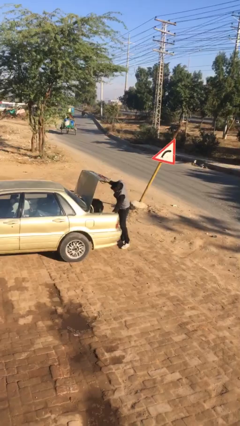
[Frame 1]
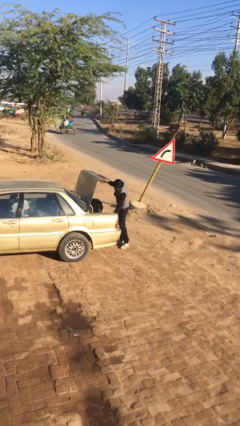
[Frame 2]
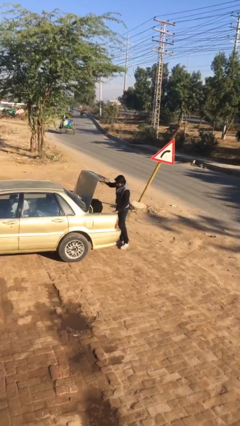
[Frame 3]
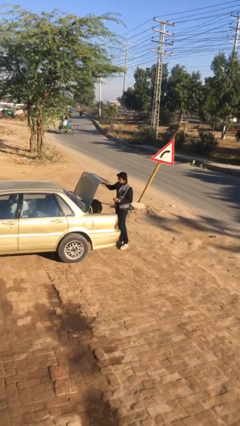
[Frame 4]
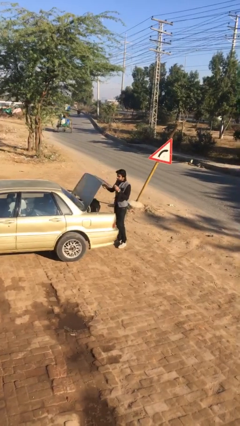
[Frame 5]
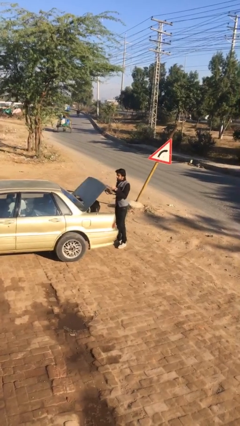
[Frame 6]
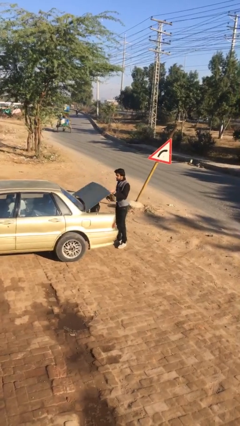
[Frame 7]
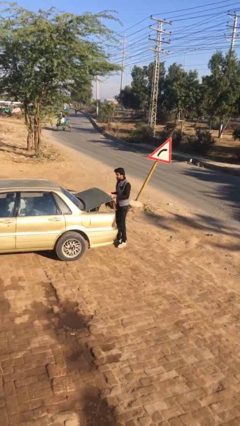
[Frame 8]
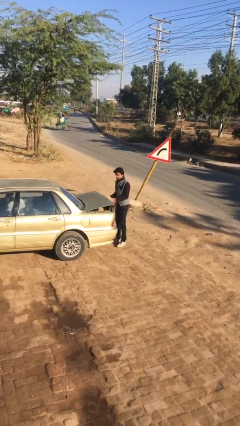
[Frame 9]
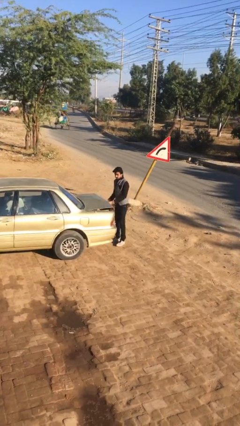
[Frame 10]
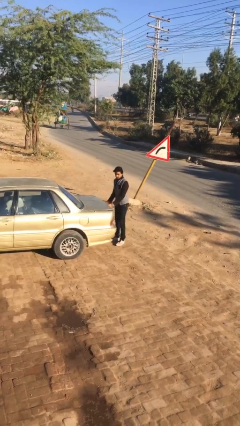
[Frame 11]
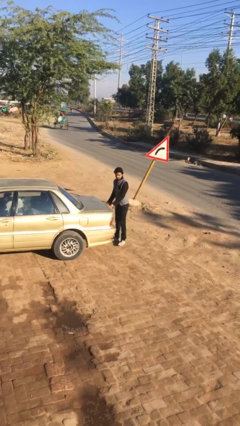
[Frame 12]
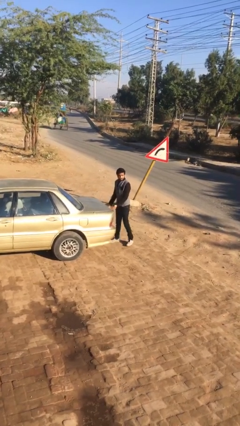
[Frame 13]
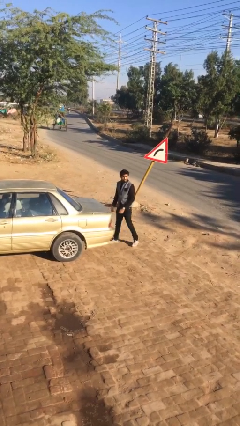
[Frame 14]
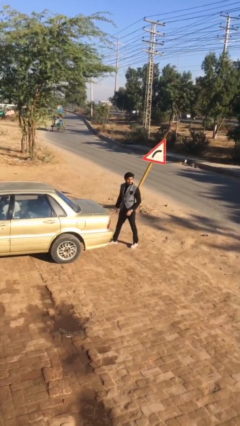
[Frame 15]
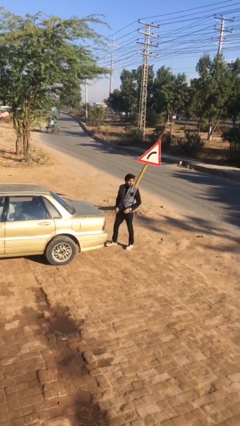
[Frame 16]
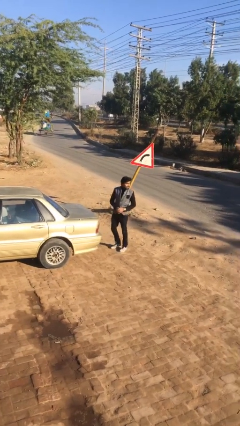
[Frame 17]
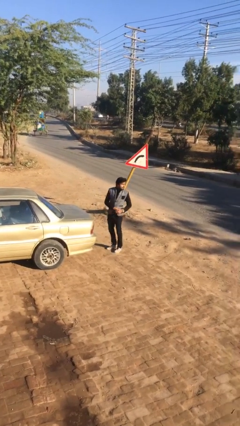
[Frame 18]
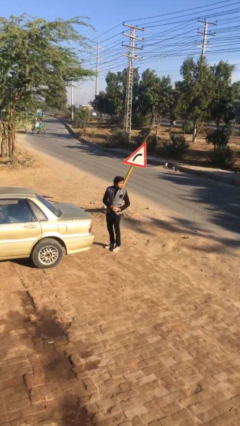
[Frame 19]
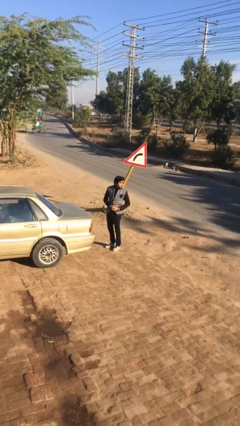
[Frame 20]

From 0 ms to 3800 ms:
person closes car trunk

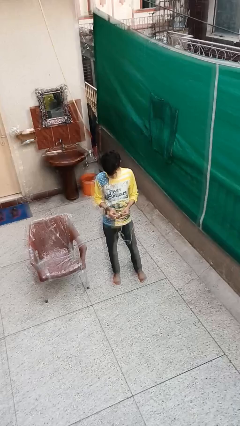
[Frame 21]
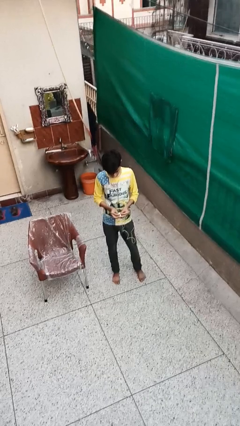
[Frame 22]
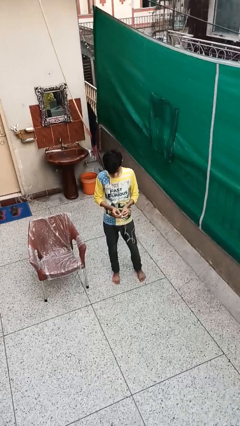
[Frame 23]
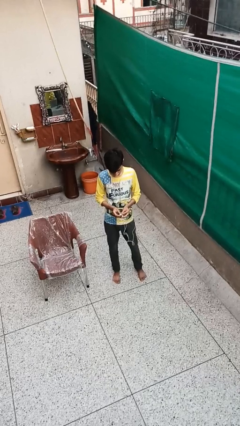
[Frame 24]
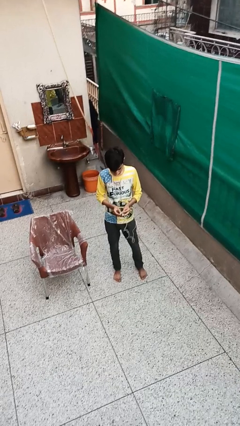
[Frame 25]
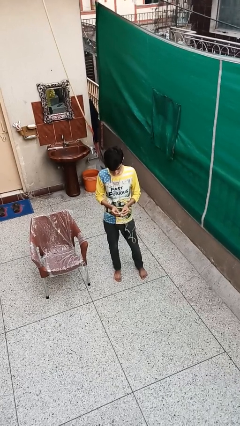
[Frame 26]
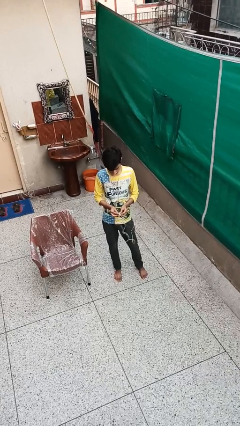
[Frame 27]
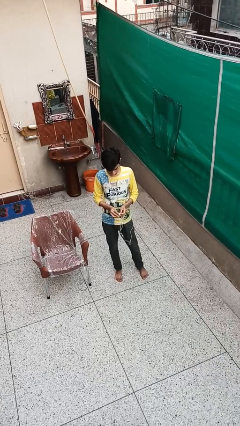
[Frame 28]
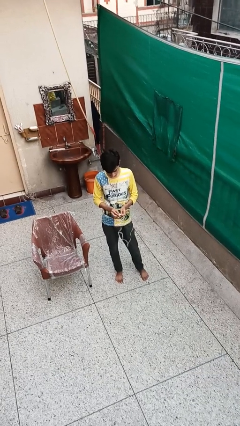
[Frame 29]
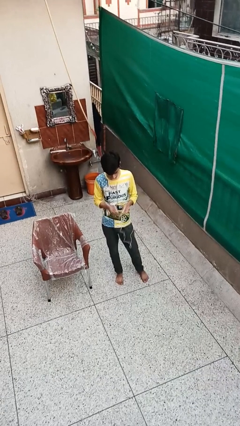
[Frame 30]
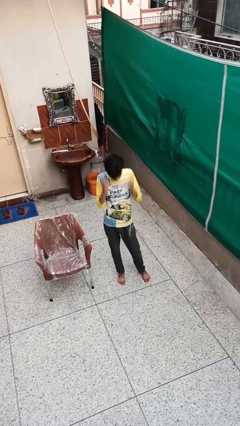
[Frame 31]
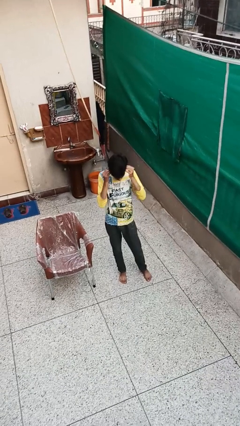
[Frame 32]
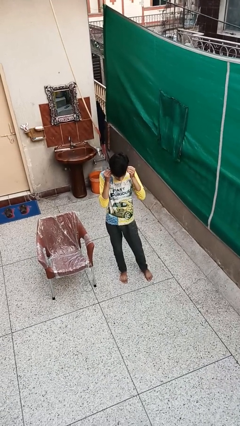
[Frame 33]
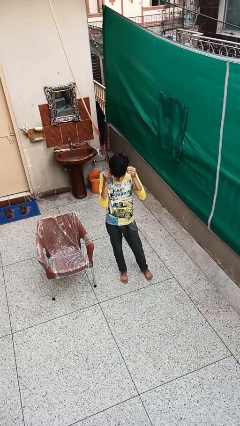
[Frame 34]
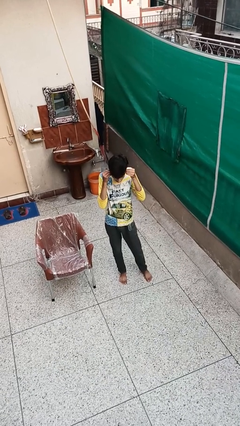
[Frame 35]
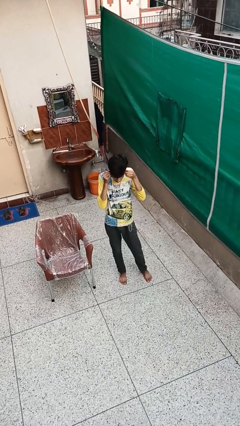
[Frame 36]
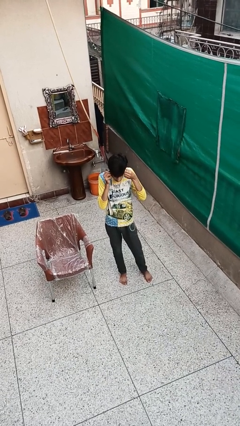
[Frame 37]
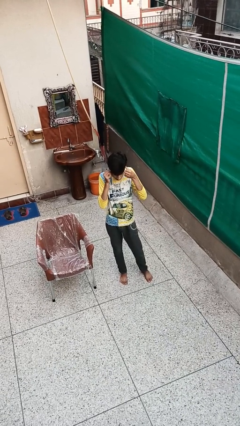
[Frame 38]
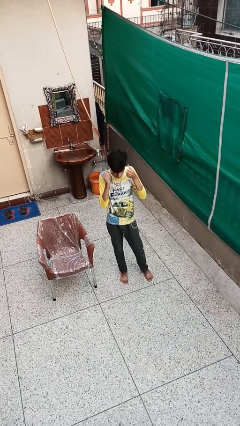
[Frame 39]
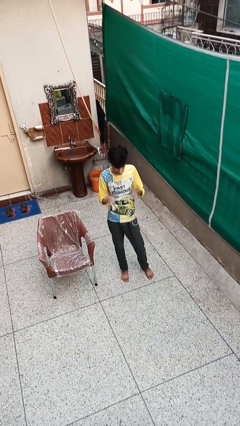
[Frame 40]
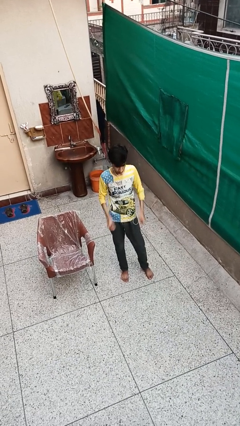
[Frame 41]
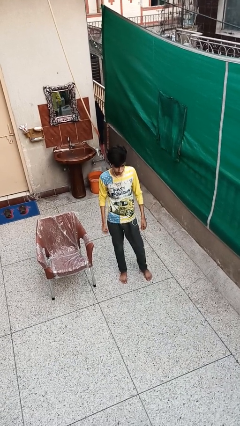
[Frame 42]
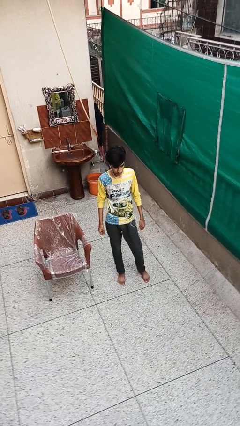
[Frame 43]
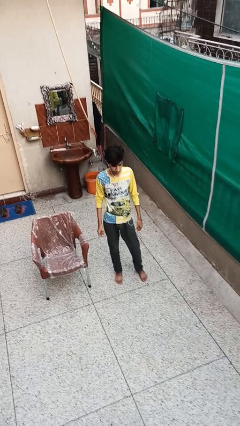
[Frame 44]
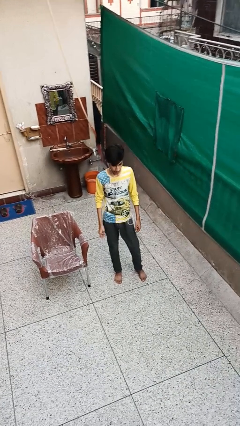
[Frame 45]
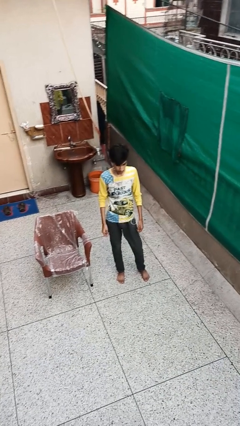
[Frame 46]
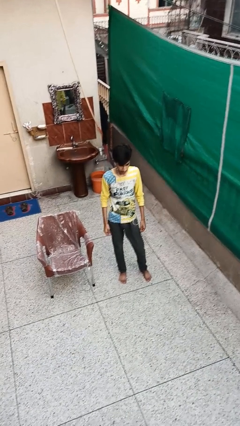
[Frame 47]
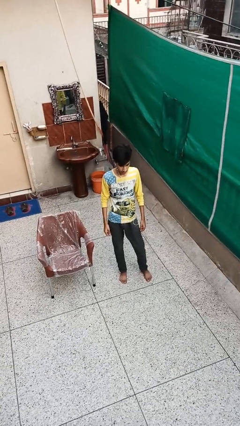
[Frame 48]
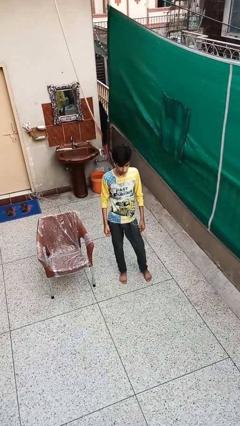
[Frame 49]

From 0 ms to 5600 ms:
person puts on headphones

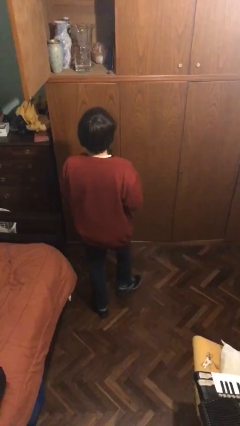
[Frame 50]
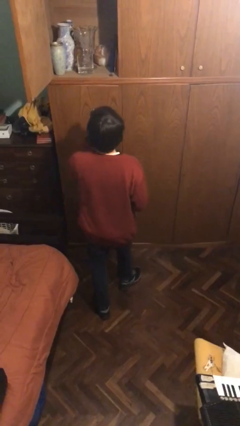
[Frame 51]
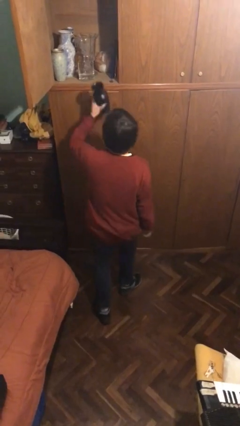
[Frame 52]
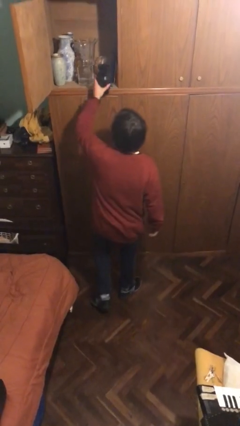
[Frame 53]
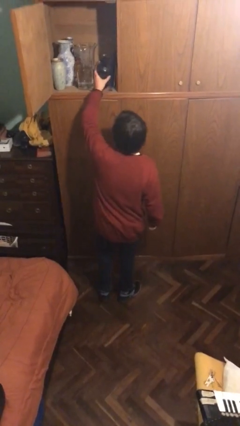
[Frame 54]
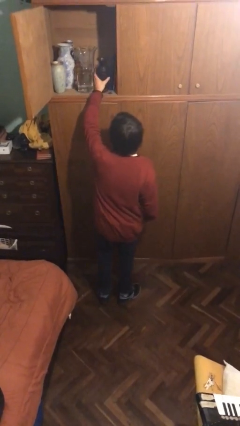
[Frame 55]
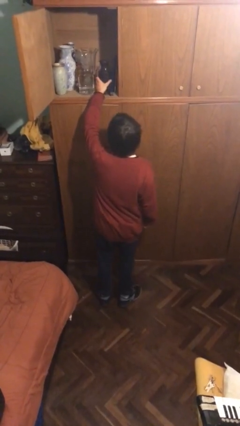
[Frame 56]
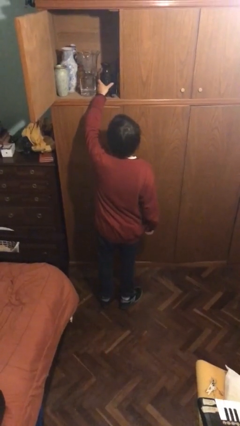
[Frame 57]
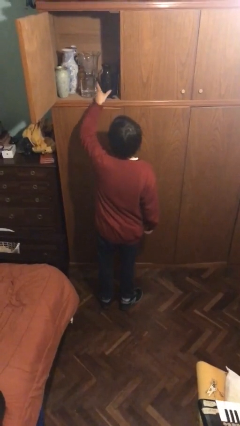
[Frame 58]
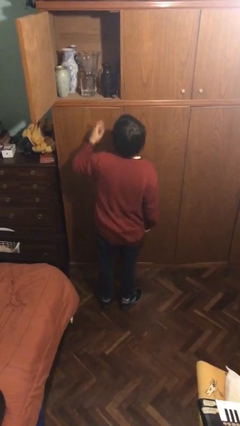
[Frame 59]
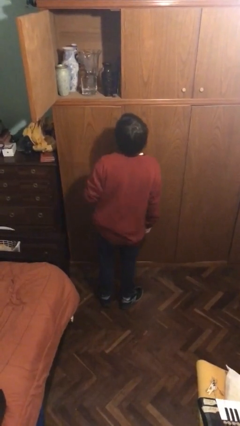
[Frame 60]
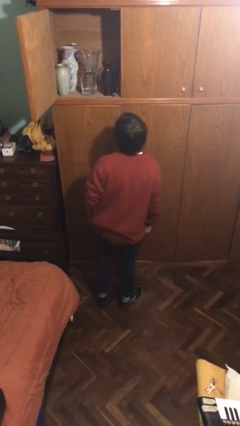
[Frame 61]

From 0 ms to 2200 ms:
person puts down object into cabinet

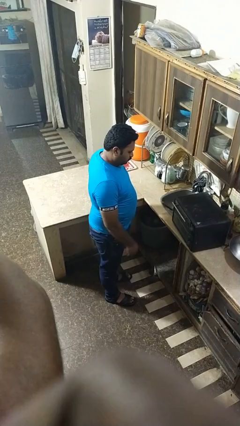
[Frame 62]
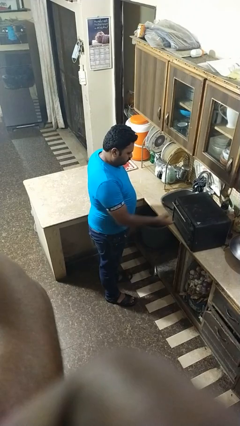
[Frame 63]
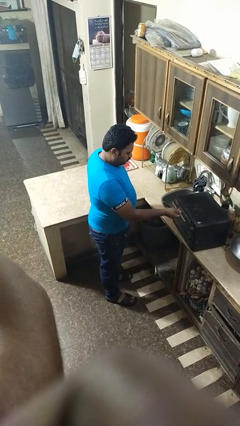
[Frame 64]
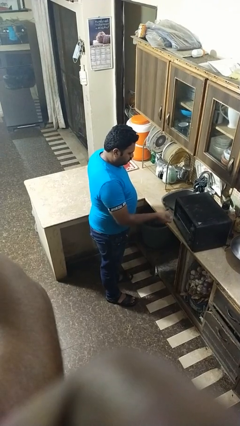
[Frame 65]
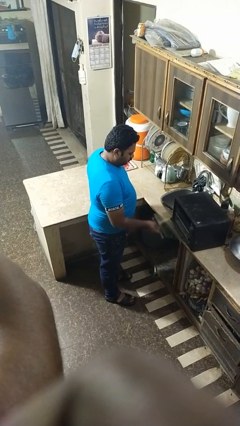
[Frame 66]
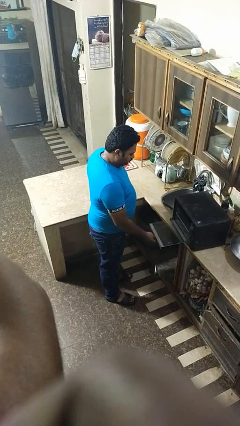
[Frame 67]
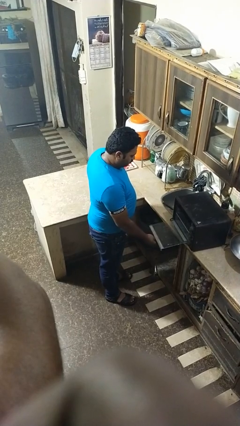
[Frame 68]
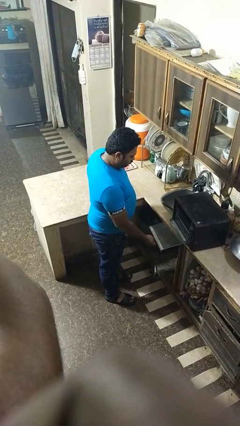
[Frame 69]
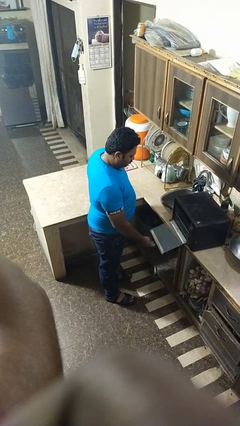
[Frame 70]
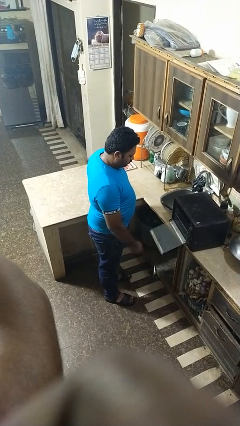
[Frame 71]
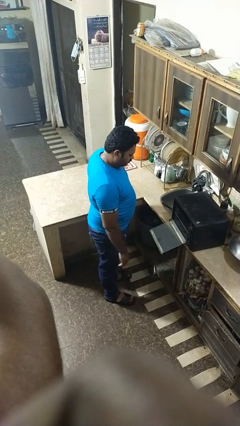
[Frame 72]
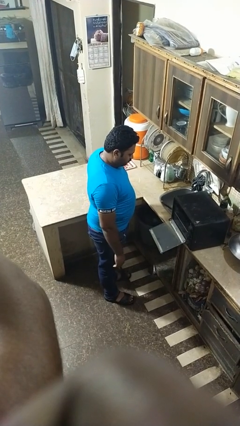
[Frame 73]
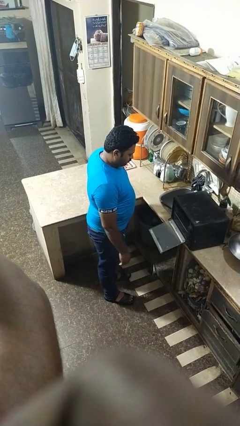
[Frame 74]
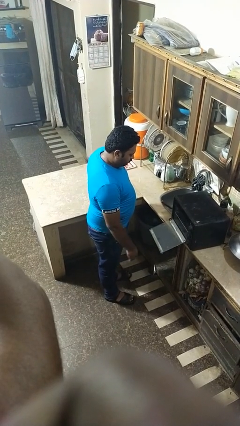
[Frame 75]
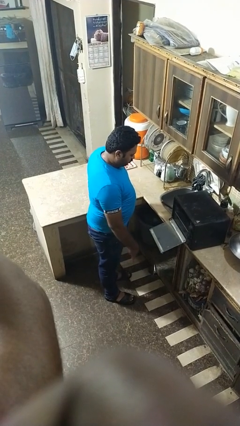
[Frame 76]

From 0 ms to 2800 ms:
person opens oven door

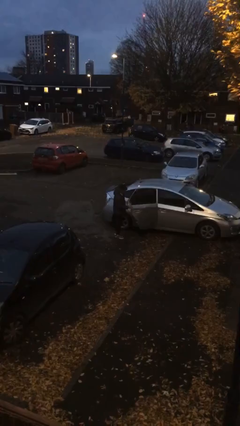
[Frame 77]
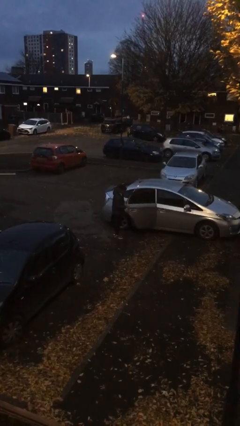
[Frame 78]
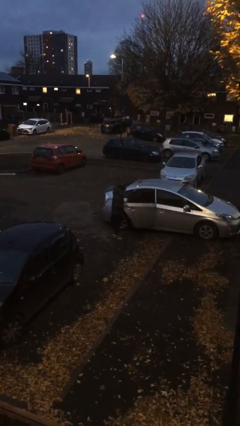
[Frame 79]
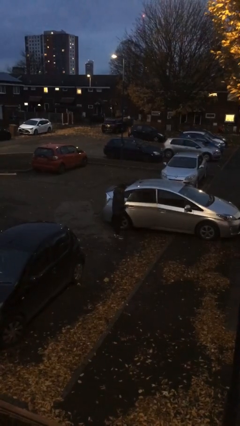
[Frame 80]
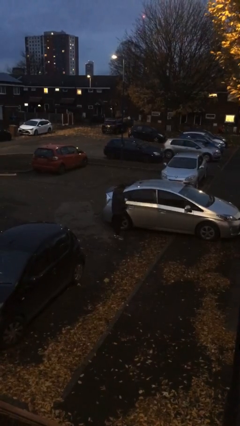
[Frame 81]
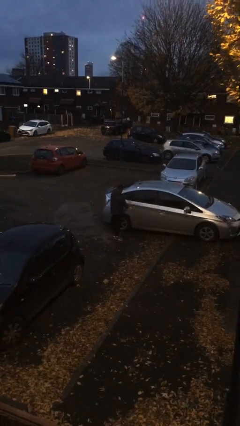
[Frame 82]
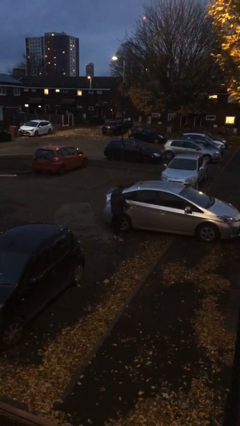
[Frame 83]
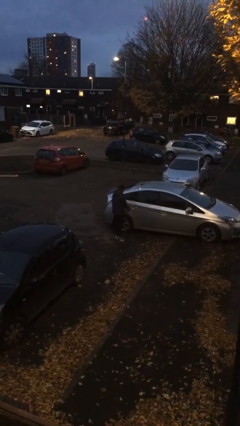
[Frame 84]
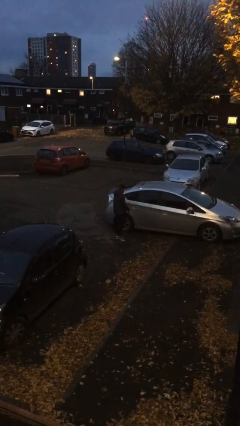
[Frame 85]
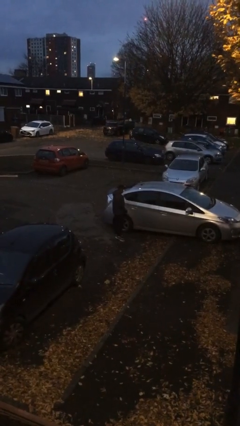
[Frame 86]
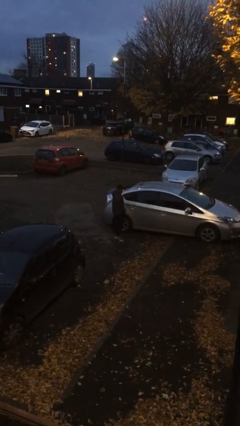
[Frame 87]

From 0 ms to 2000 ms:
person closes car door

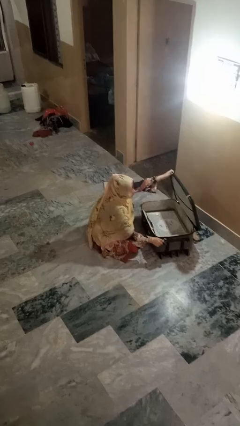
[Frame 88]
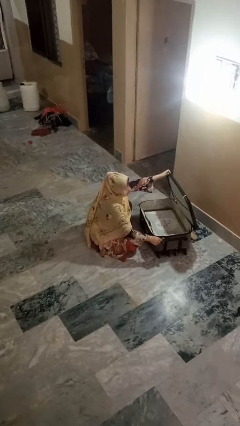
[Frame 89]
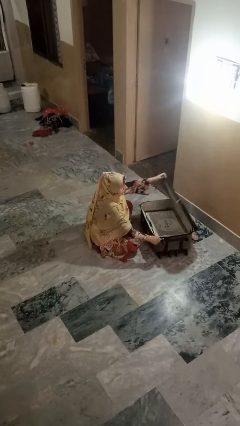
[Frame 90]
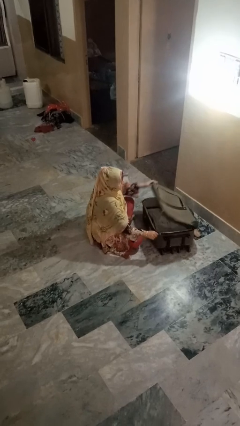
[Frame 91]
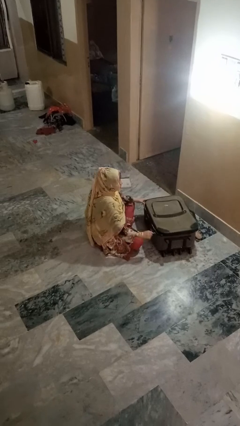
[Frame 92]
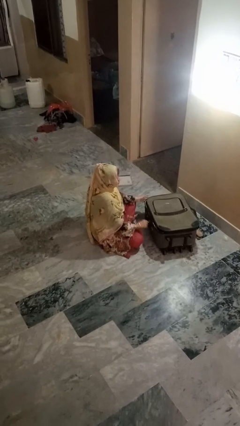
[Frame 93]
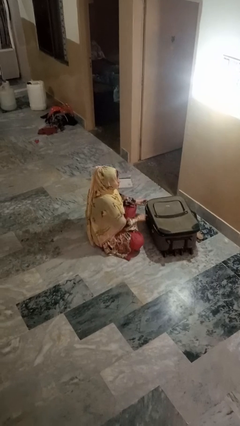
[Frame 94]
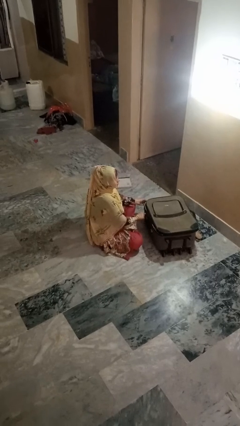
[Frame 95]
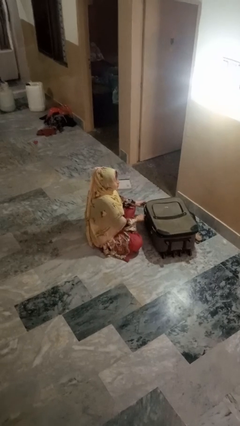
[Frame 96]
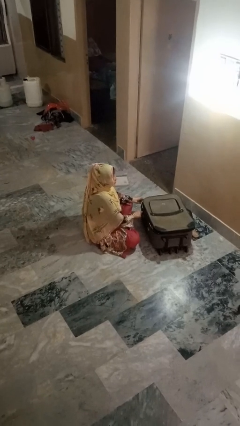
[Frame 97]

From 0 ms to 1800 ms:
person closes suitcase
